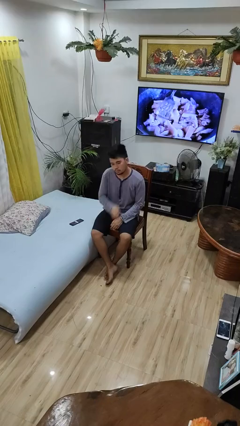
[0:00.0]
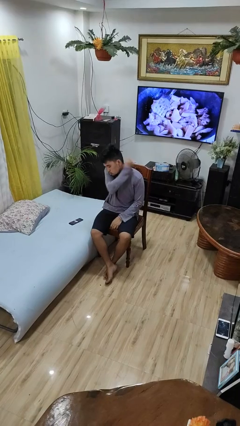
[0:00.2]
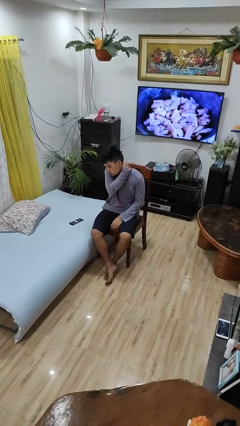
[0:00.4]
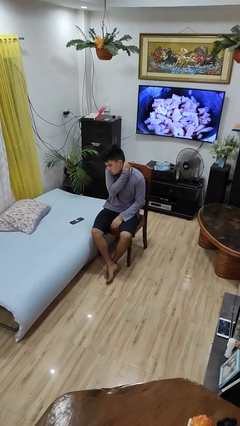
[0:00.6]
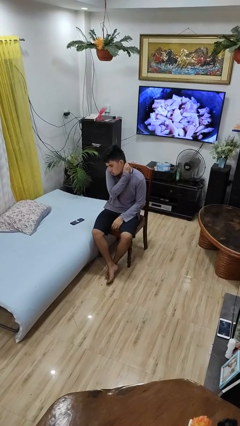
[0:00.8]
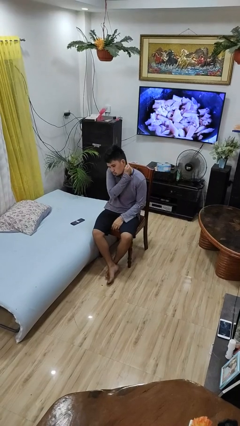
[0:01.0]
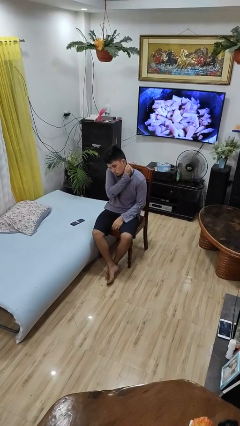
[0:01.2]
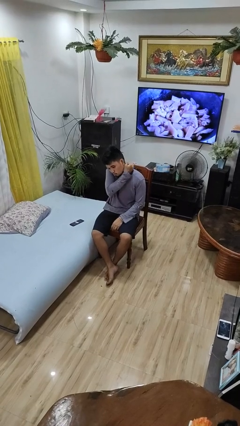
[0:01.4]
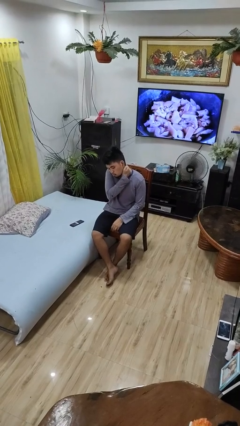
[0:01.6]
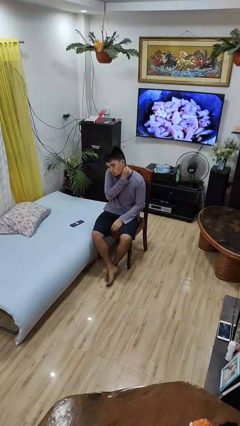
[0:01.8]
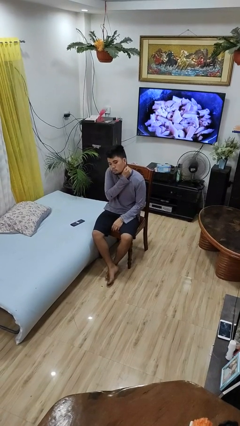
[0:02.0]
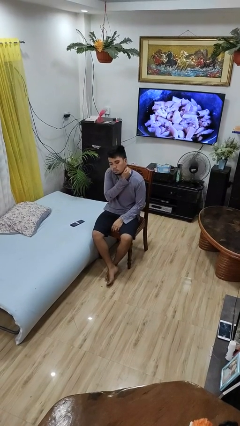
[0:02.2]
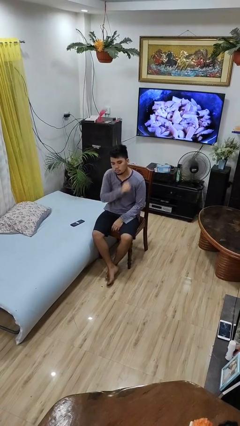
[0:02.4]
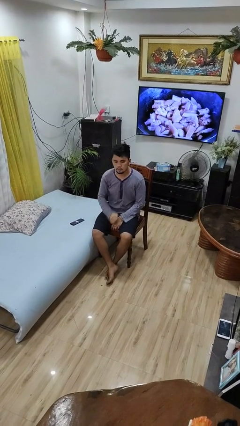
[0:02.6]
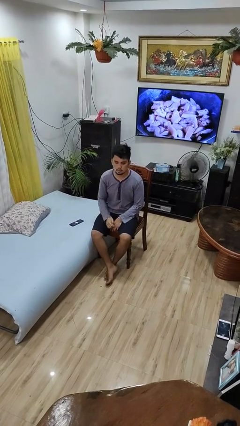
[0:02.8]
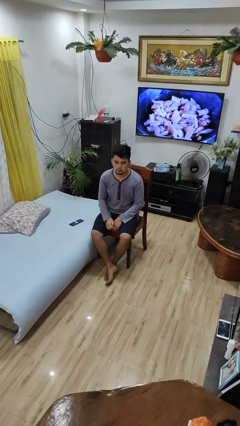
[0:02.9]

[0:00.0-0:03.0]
person rubs neck

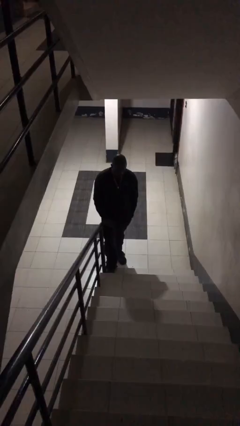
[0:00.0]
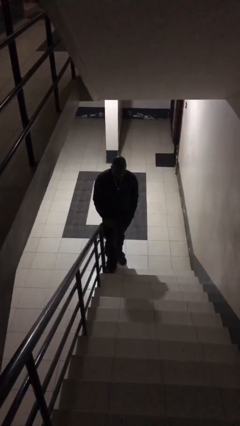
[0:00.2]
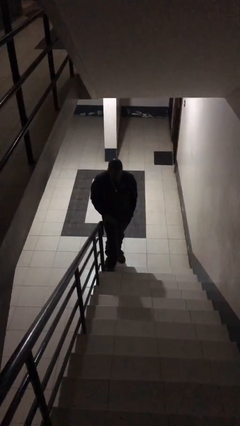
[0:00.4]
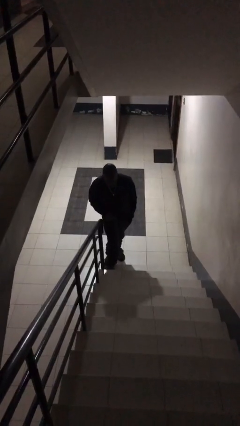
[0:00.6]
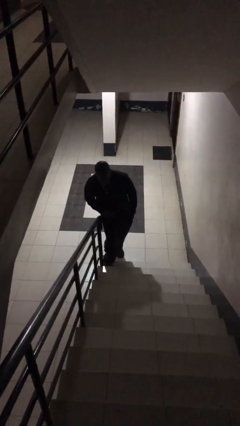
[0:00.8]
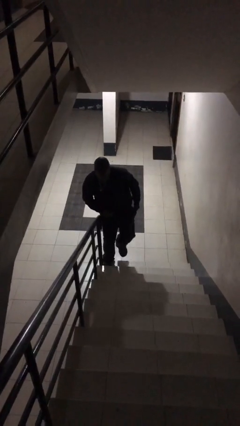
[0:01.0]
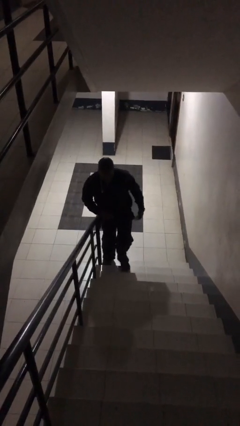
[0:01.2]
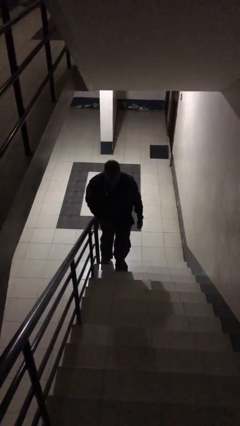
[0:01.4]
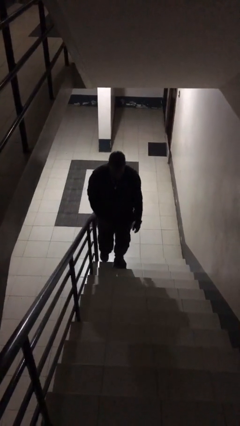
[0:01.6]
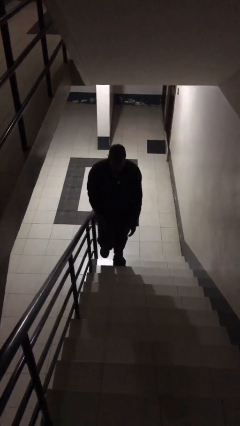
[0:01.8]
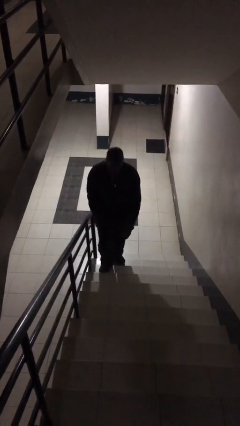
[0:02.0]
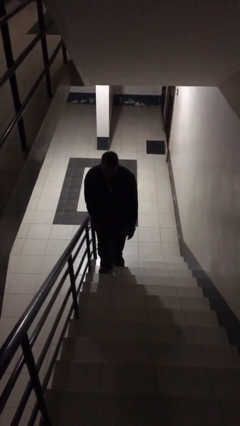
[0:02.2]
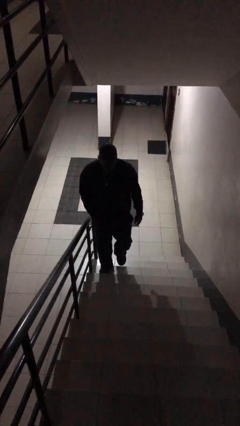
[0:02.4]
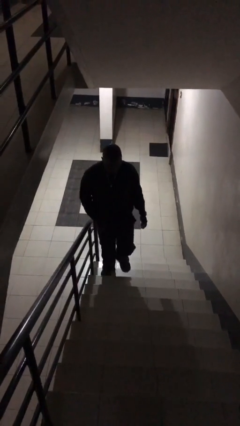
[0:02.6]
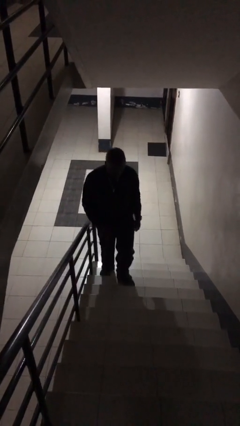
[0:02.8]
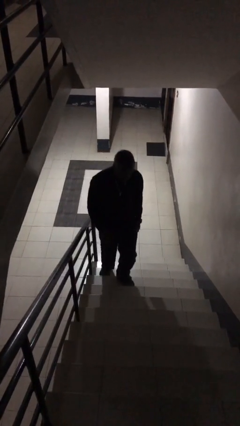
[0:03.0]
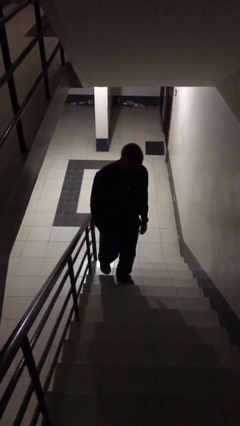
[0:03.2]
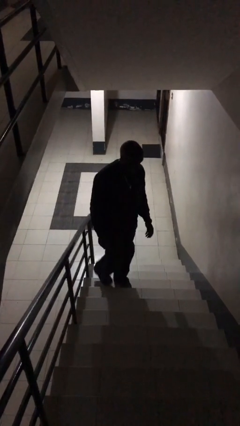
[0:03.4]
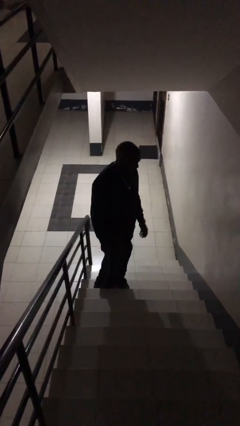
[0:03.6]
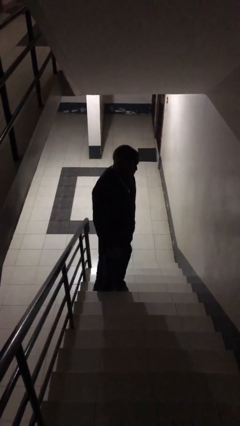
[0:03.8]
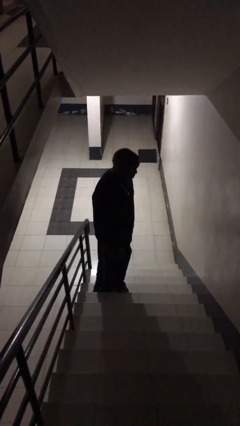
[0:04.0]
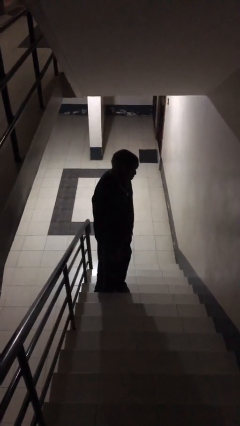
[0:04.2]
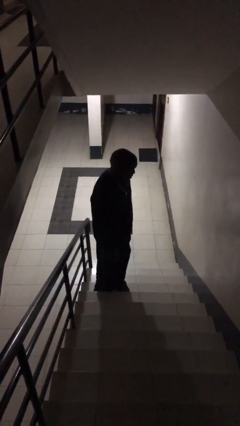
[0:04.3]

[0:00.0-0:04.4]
person climbs up stairs

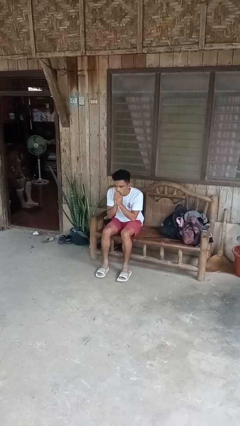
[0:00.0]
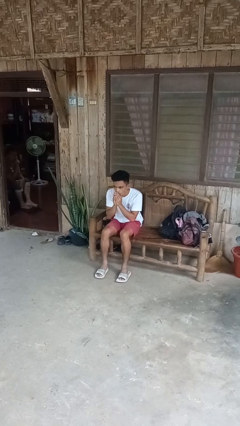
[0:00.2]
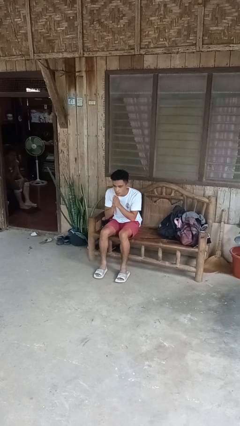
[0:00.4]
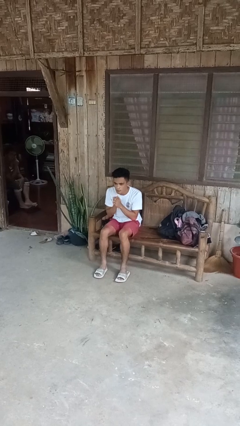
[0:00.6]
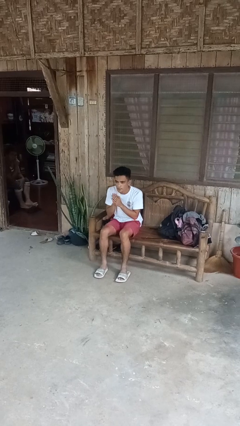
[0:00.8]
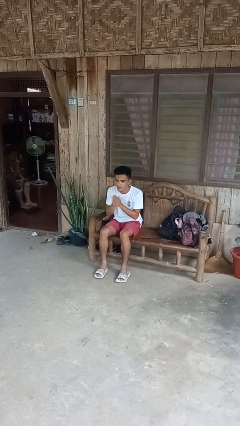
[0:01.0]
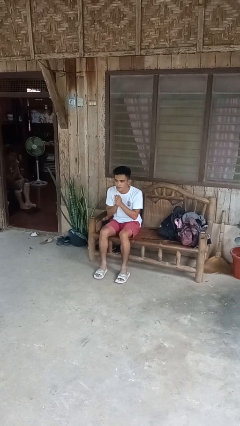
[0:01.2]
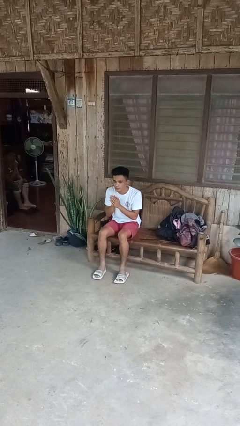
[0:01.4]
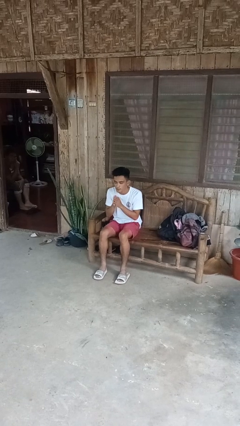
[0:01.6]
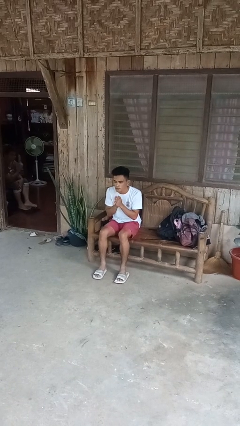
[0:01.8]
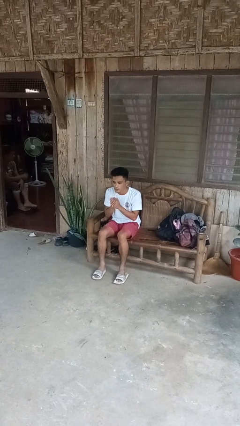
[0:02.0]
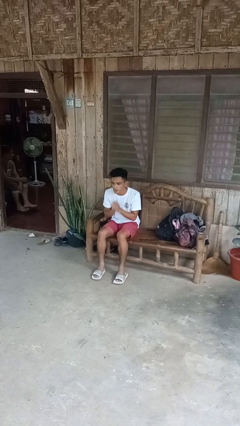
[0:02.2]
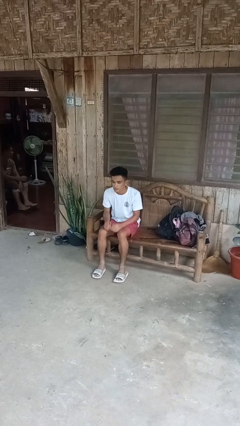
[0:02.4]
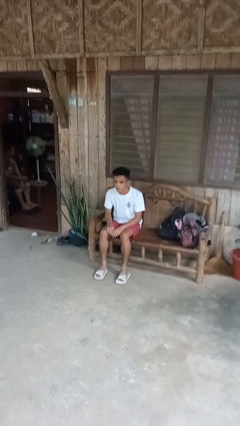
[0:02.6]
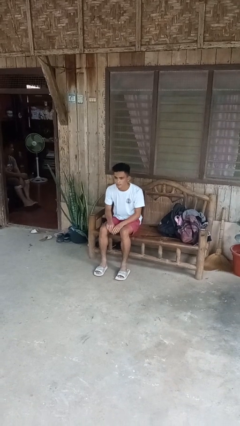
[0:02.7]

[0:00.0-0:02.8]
person blows into hands

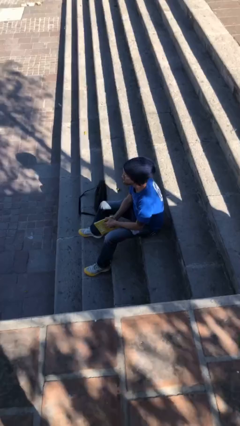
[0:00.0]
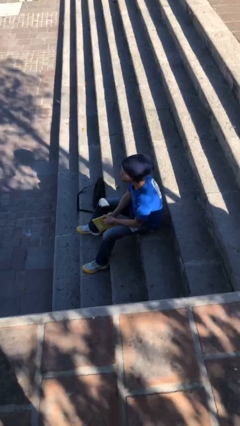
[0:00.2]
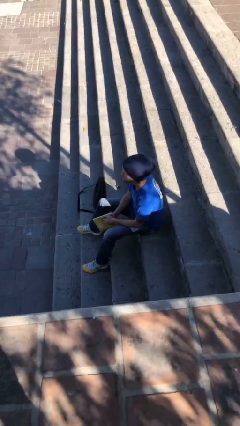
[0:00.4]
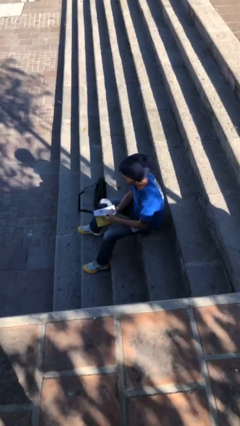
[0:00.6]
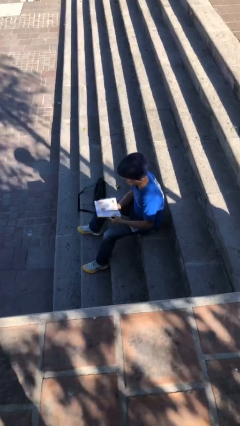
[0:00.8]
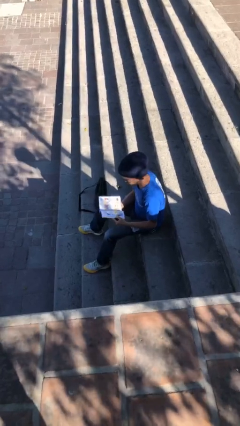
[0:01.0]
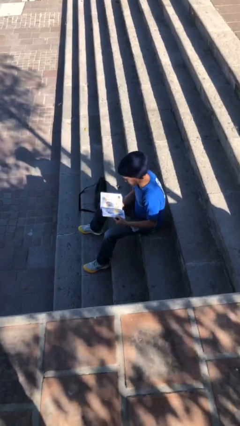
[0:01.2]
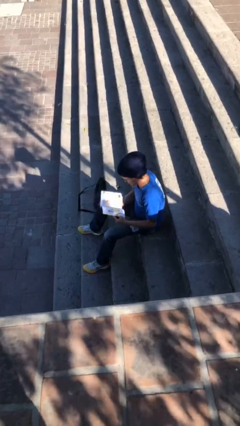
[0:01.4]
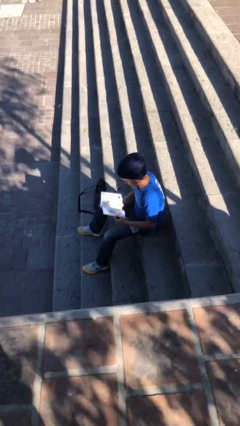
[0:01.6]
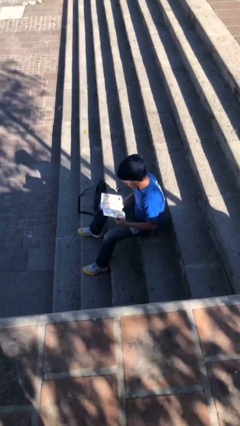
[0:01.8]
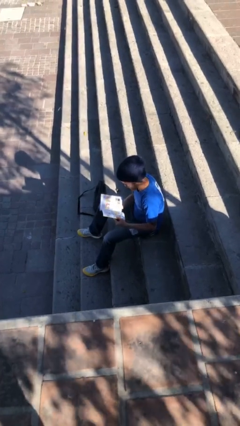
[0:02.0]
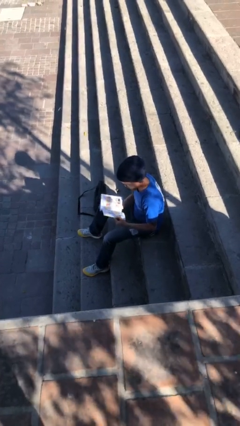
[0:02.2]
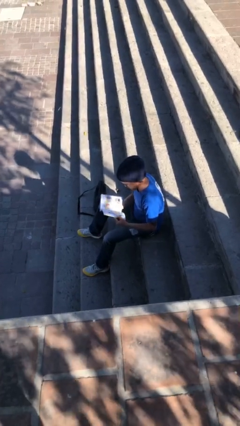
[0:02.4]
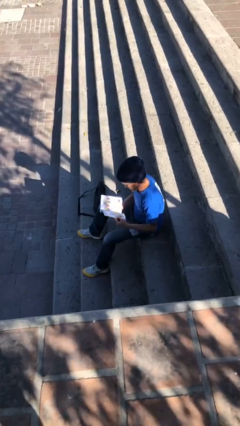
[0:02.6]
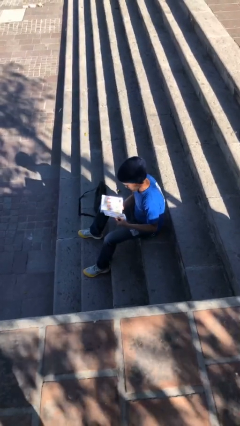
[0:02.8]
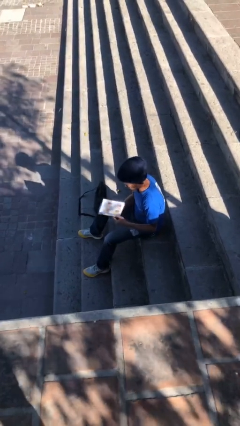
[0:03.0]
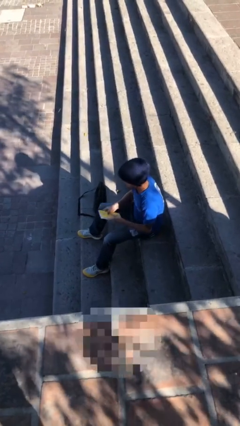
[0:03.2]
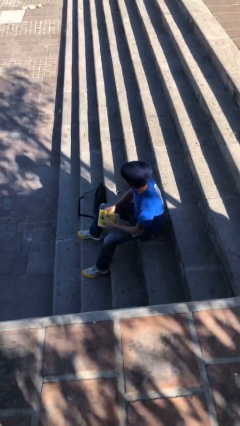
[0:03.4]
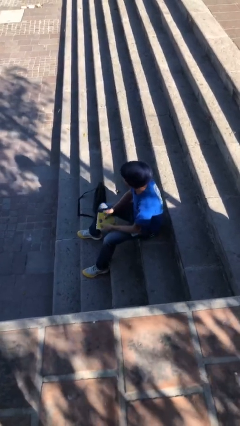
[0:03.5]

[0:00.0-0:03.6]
person reads document

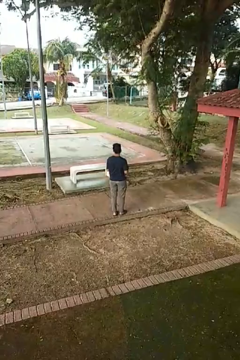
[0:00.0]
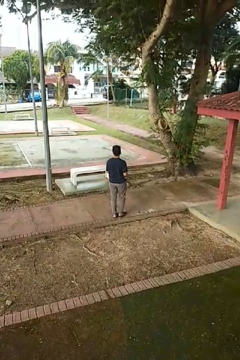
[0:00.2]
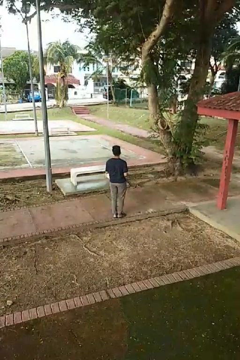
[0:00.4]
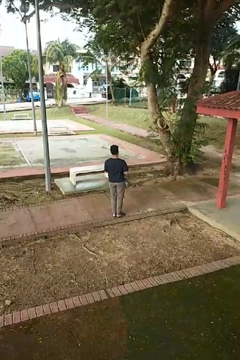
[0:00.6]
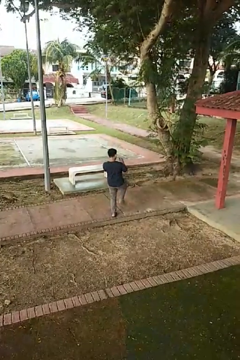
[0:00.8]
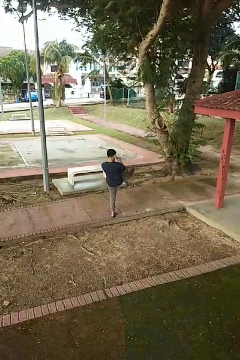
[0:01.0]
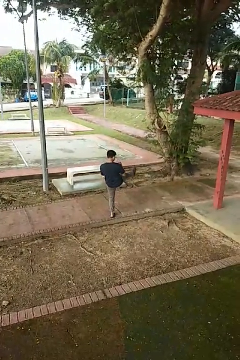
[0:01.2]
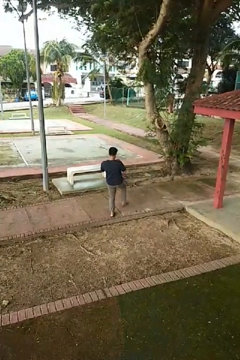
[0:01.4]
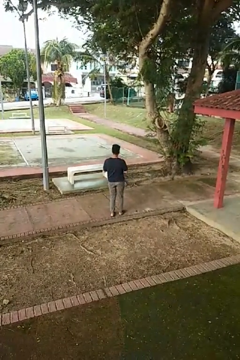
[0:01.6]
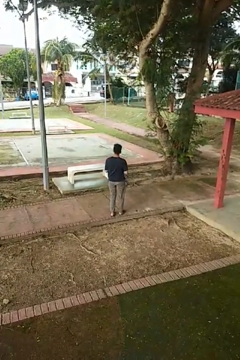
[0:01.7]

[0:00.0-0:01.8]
person karate kicks

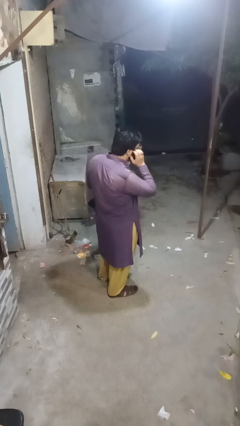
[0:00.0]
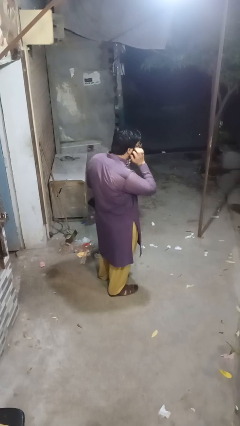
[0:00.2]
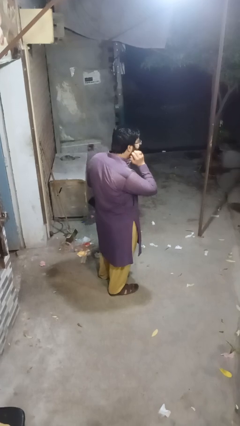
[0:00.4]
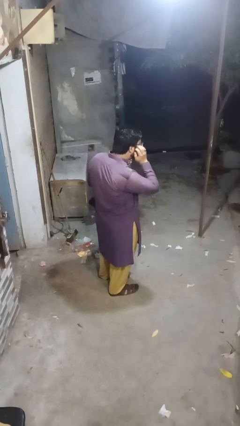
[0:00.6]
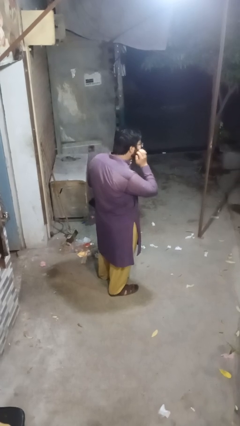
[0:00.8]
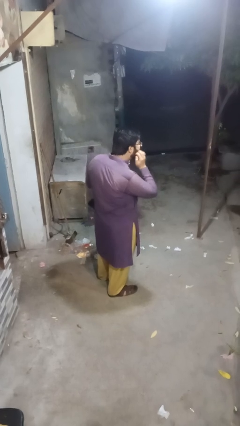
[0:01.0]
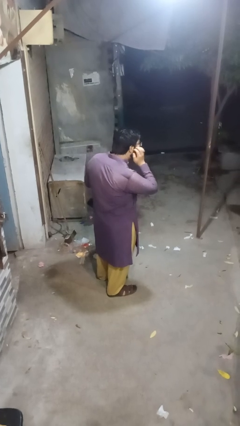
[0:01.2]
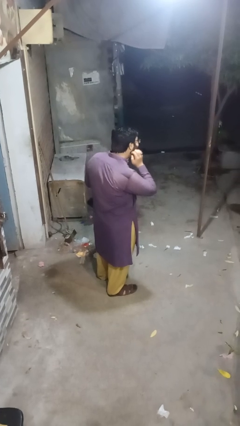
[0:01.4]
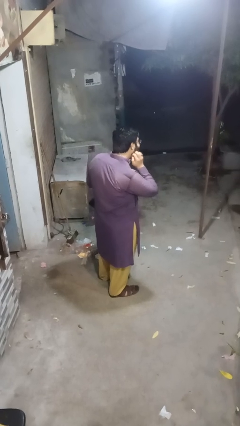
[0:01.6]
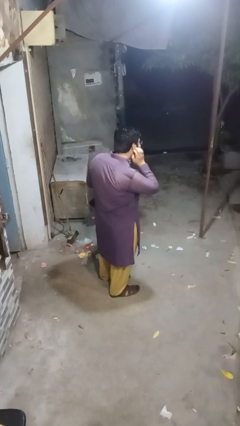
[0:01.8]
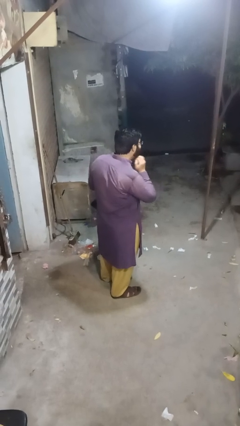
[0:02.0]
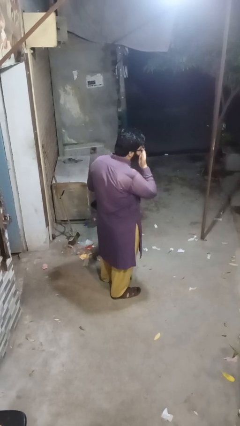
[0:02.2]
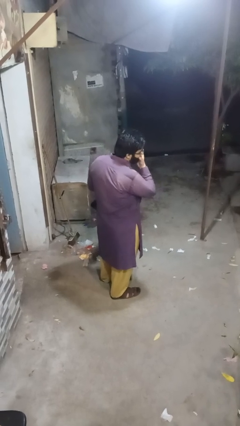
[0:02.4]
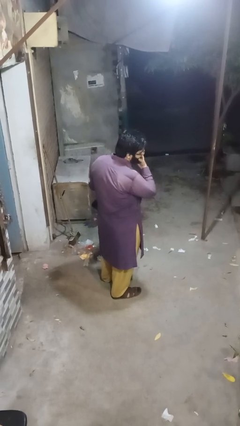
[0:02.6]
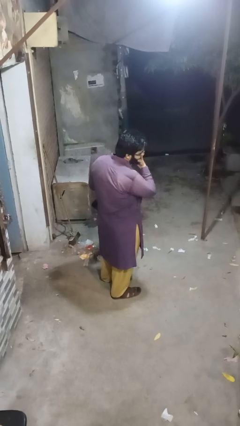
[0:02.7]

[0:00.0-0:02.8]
person scratches face
